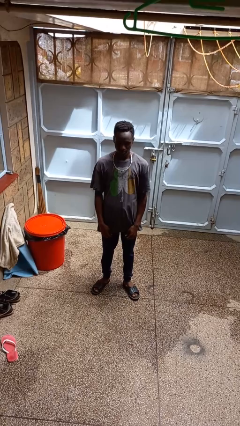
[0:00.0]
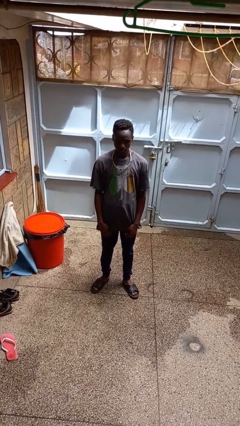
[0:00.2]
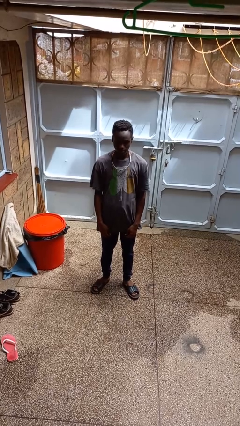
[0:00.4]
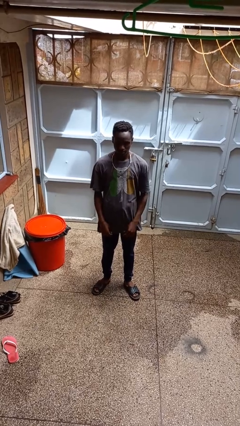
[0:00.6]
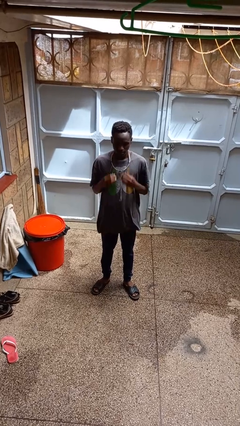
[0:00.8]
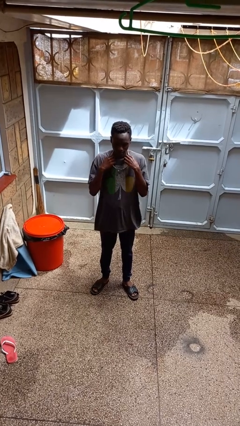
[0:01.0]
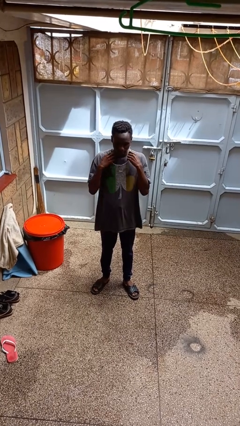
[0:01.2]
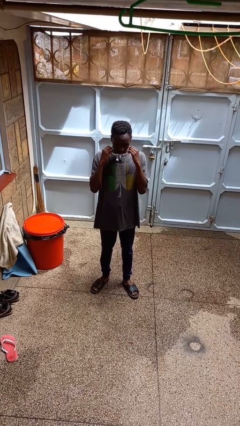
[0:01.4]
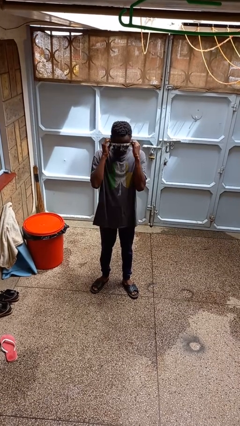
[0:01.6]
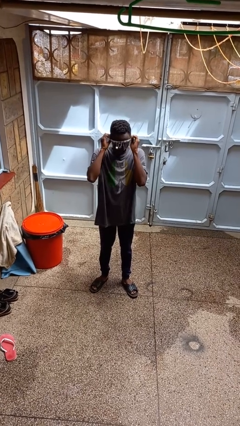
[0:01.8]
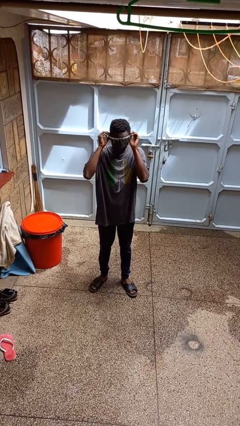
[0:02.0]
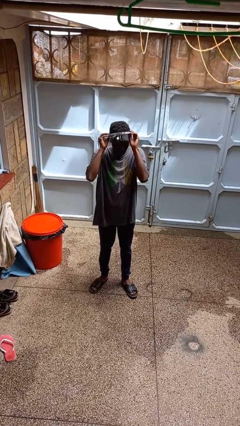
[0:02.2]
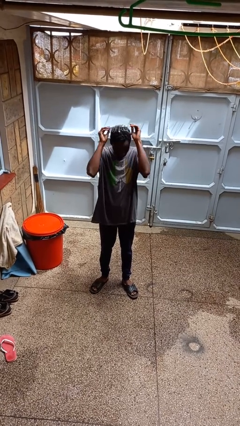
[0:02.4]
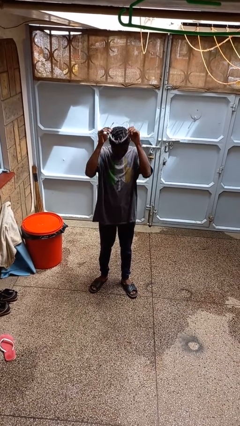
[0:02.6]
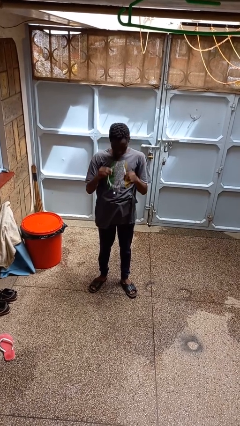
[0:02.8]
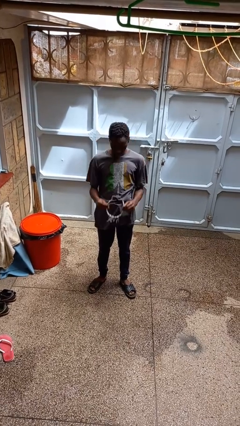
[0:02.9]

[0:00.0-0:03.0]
person takes off necklace

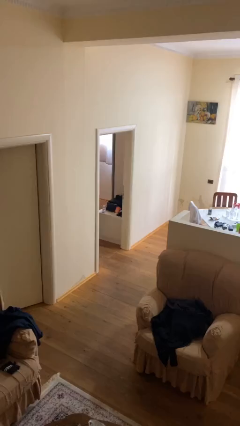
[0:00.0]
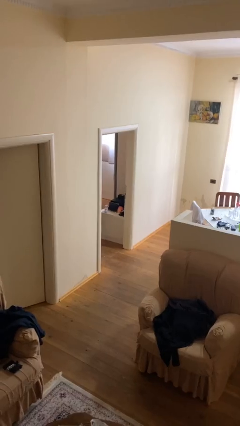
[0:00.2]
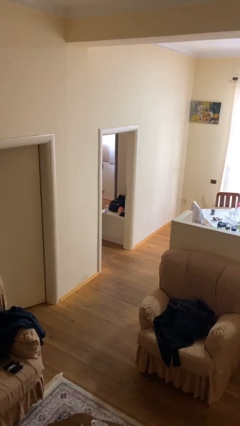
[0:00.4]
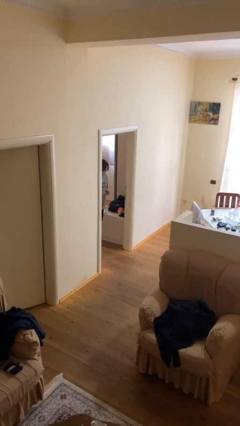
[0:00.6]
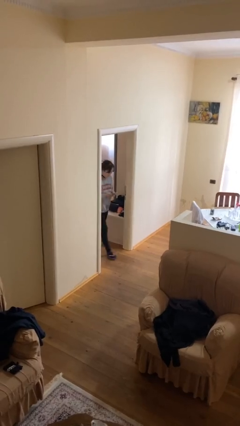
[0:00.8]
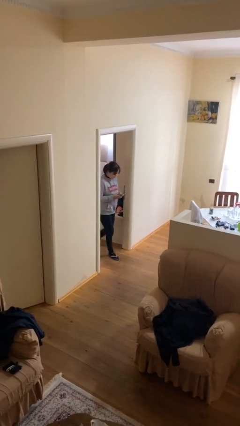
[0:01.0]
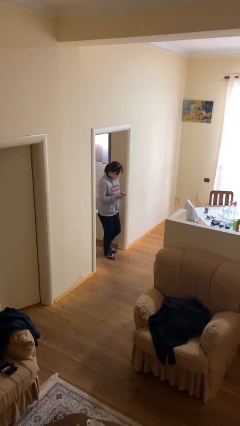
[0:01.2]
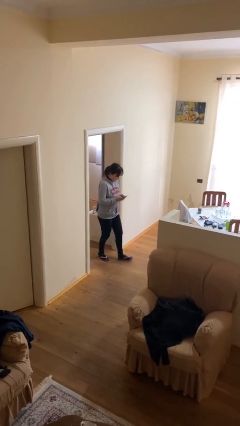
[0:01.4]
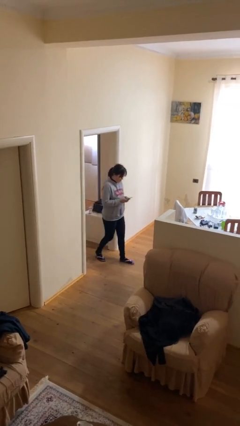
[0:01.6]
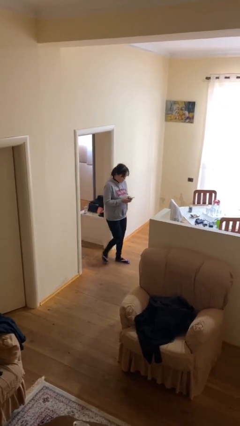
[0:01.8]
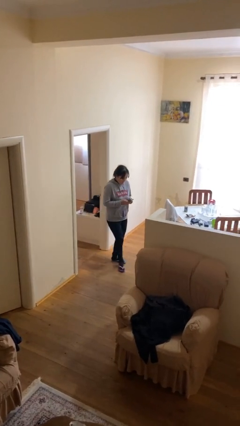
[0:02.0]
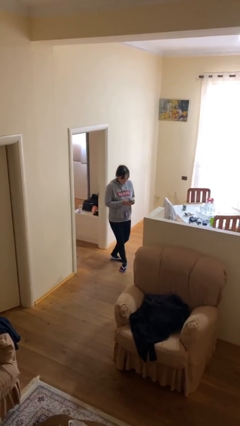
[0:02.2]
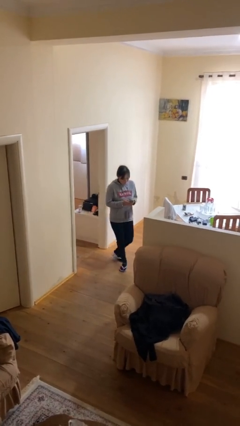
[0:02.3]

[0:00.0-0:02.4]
person enters scene through structure

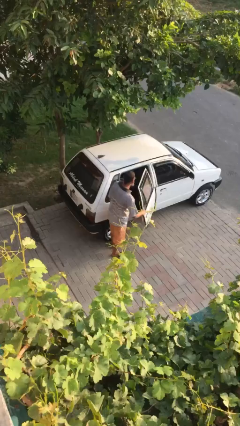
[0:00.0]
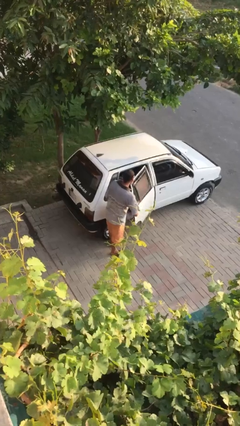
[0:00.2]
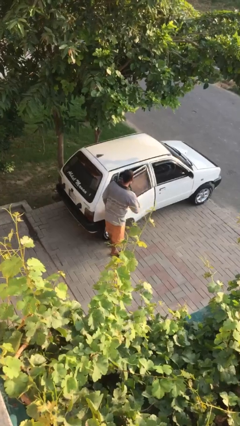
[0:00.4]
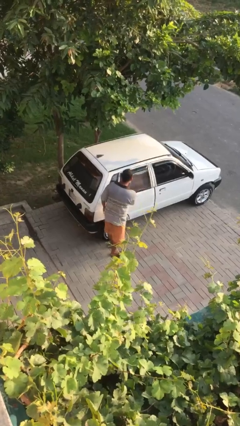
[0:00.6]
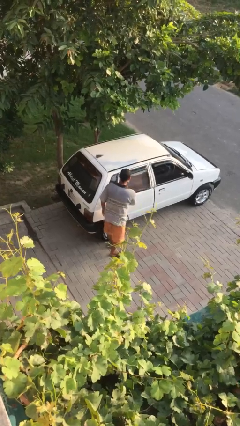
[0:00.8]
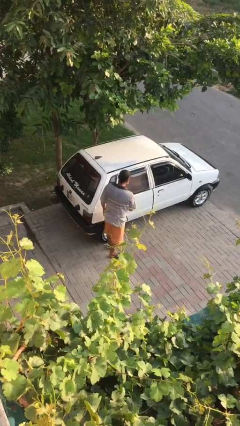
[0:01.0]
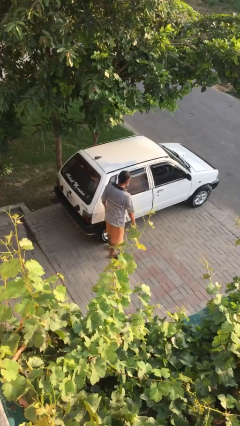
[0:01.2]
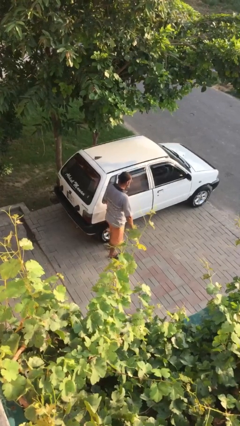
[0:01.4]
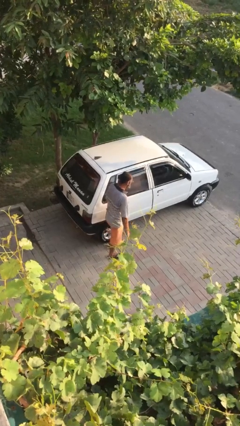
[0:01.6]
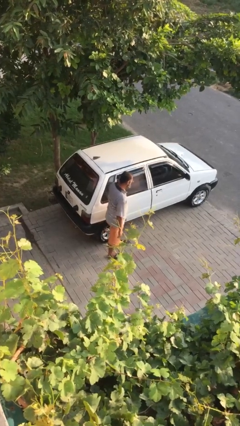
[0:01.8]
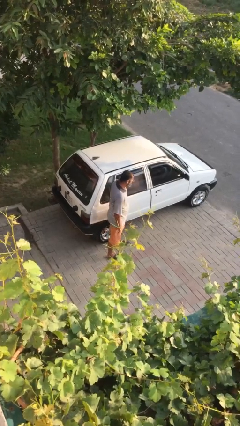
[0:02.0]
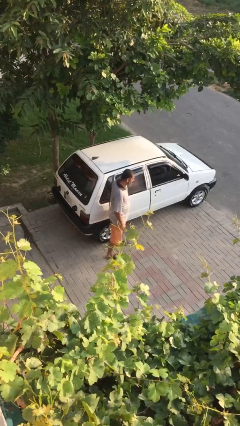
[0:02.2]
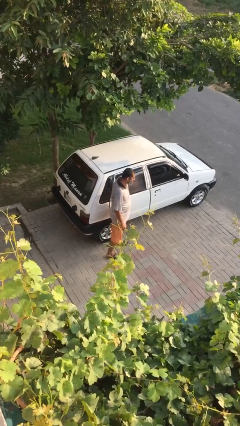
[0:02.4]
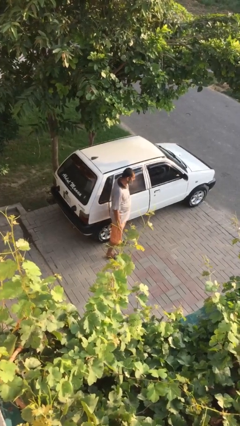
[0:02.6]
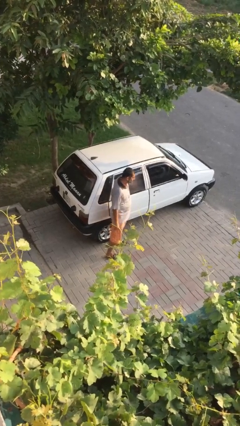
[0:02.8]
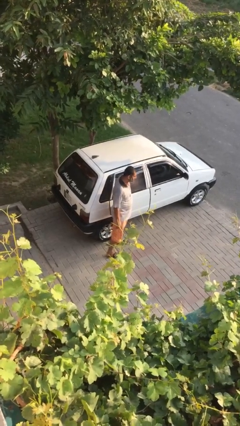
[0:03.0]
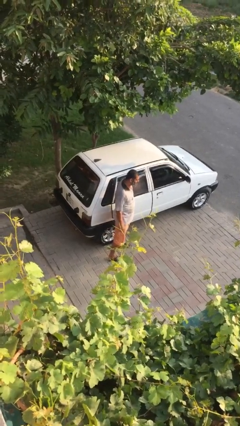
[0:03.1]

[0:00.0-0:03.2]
person closes car door

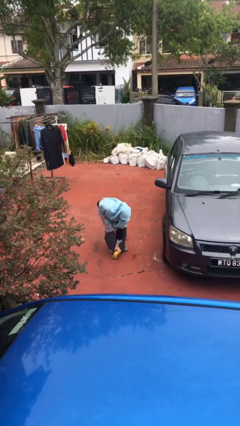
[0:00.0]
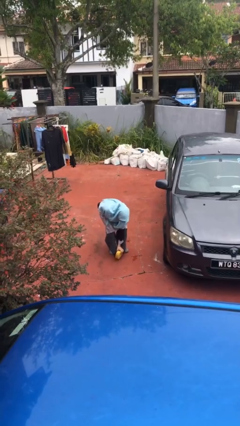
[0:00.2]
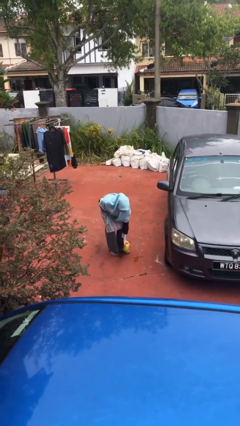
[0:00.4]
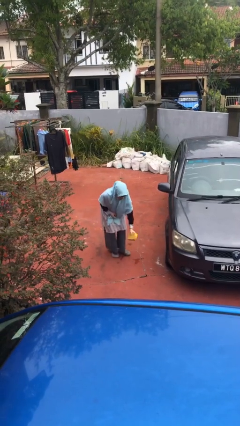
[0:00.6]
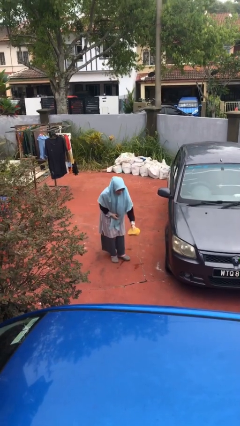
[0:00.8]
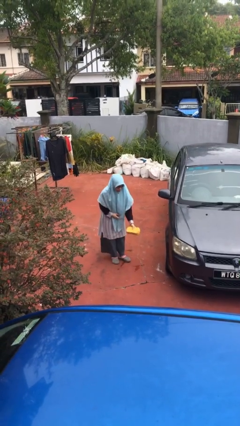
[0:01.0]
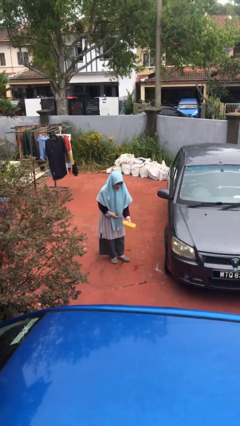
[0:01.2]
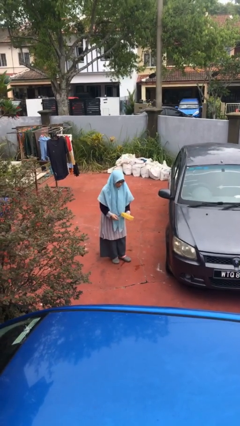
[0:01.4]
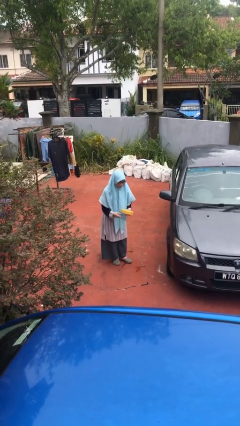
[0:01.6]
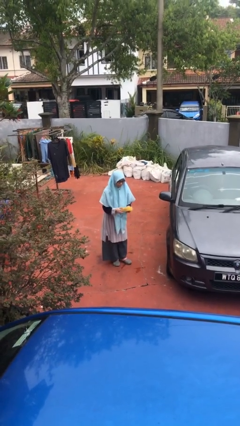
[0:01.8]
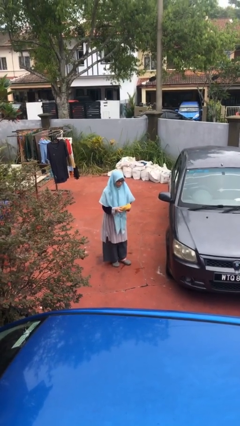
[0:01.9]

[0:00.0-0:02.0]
person picks up object from floor

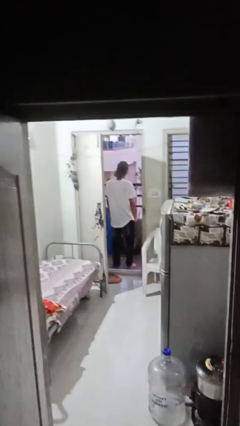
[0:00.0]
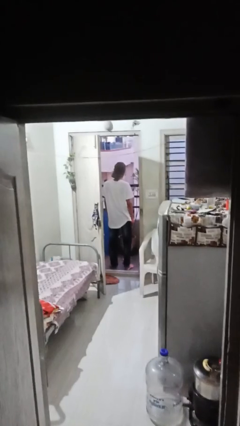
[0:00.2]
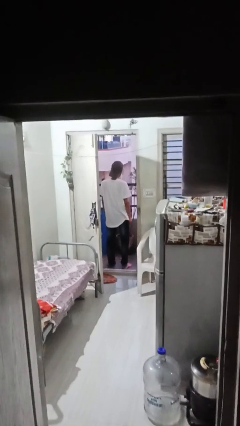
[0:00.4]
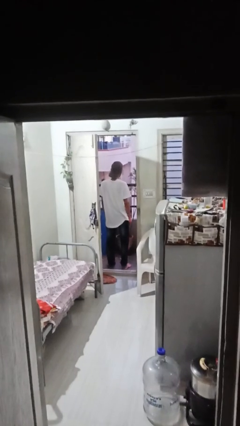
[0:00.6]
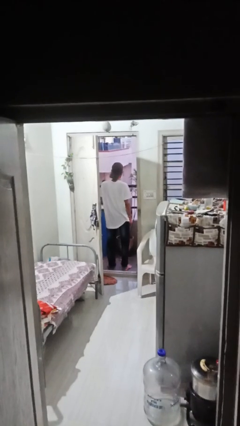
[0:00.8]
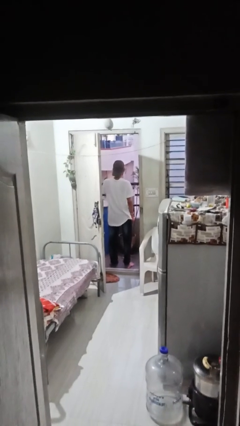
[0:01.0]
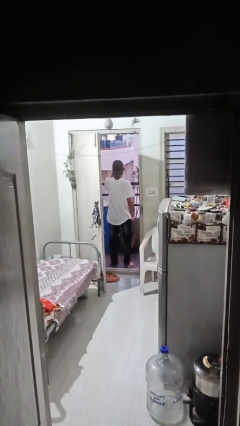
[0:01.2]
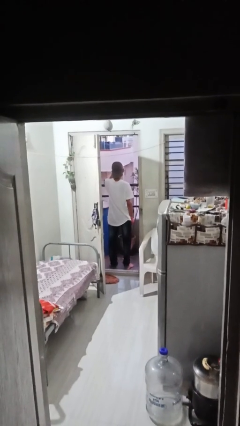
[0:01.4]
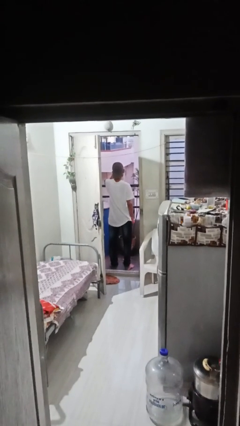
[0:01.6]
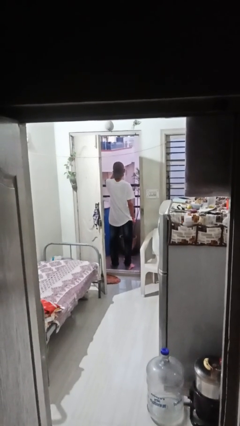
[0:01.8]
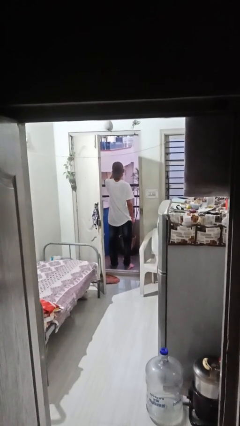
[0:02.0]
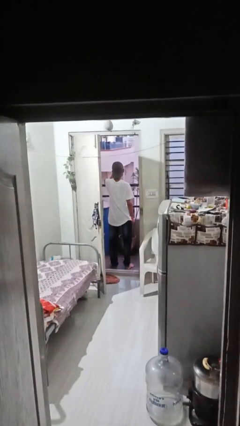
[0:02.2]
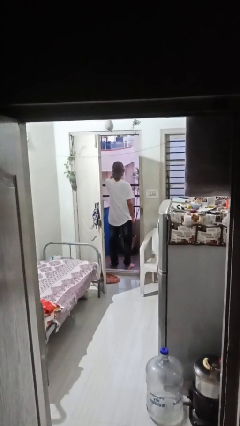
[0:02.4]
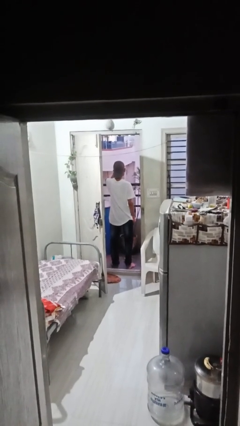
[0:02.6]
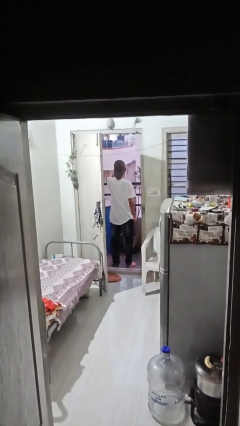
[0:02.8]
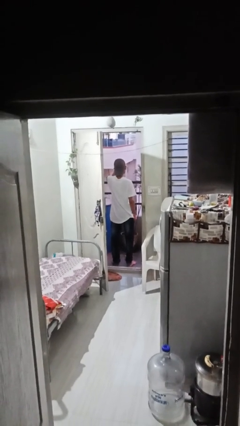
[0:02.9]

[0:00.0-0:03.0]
person shades eyes

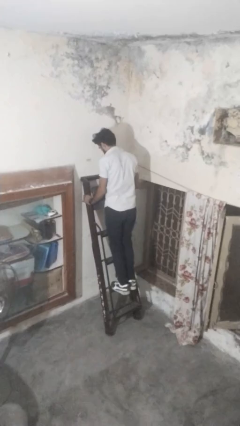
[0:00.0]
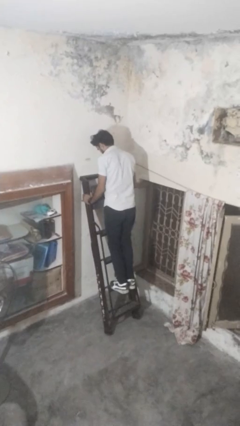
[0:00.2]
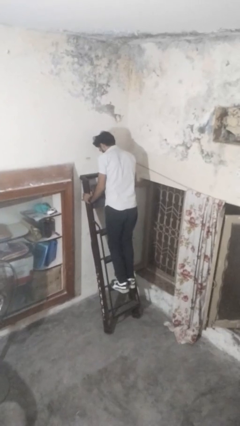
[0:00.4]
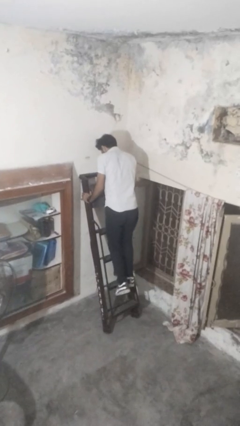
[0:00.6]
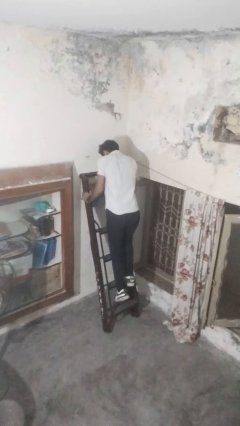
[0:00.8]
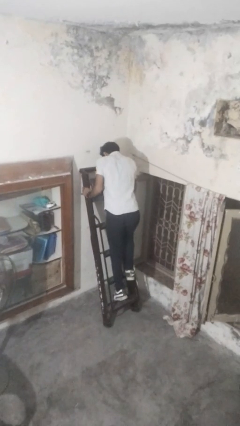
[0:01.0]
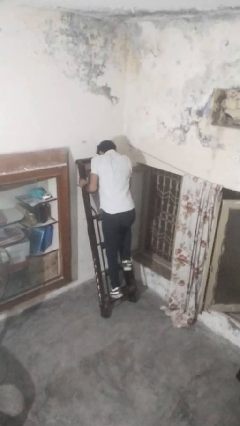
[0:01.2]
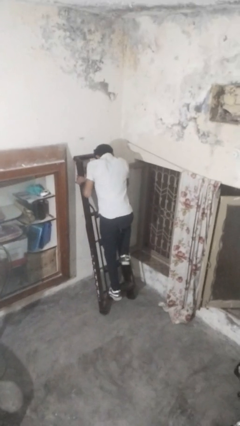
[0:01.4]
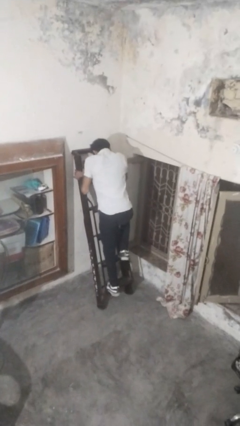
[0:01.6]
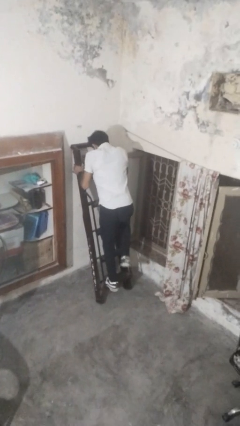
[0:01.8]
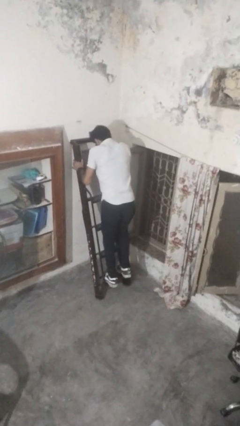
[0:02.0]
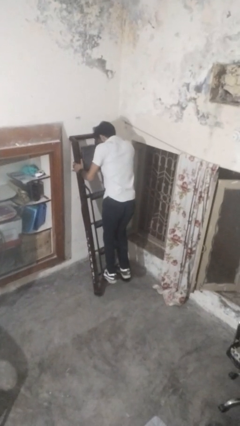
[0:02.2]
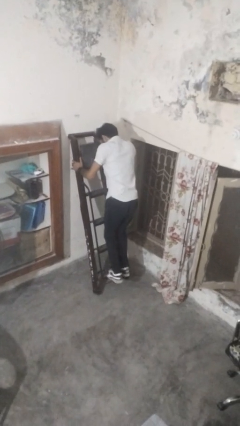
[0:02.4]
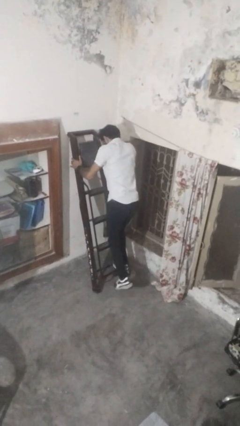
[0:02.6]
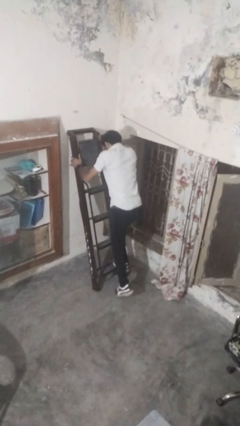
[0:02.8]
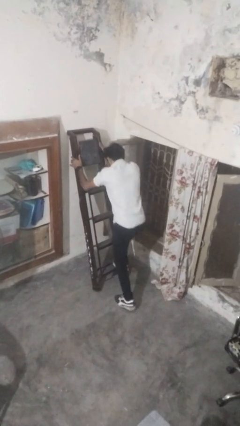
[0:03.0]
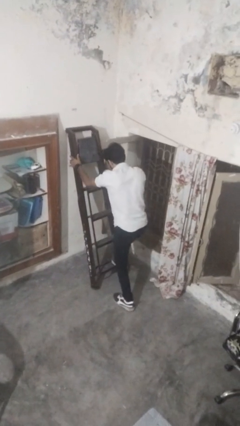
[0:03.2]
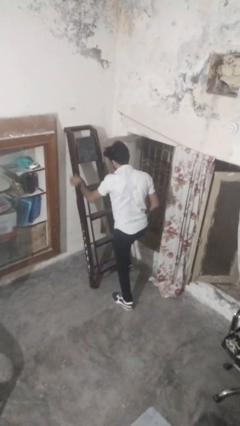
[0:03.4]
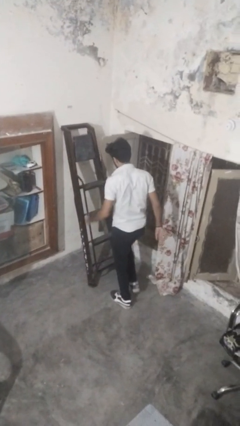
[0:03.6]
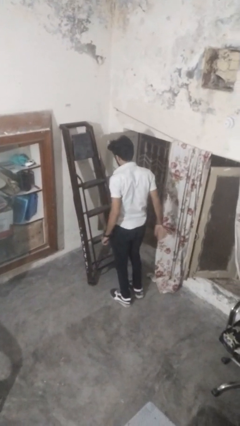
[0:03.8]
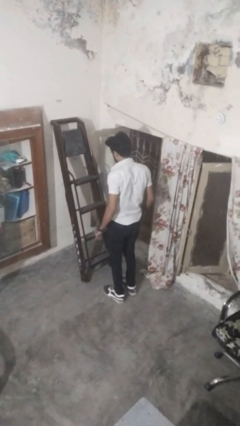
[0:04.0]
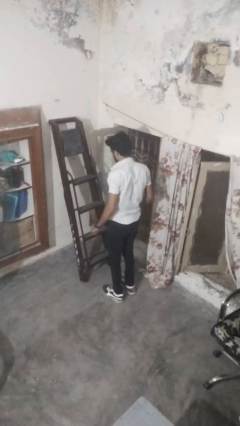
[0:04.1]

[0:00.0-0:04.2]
person climbs down ladder
